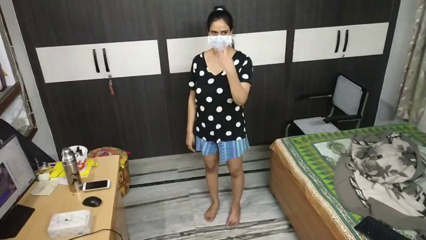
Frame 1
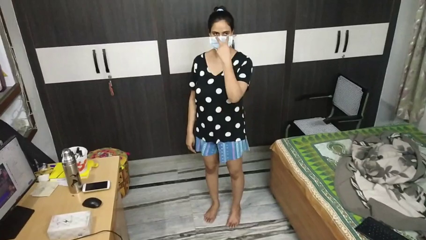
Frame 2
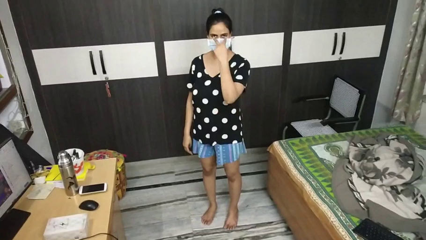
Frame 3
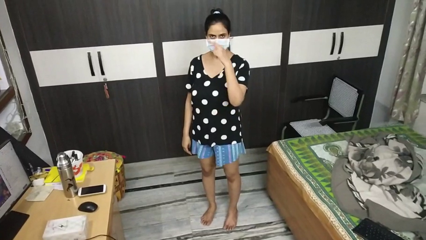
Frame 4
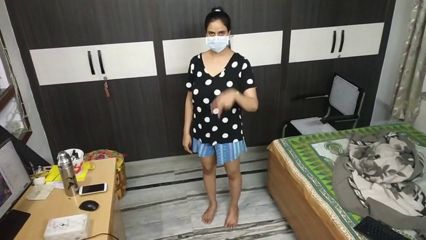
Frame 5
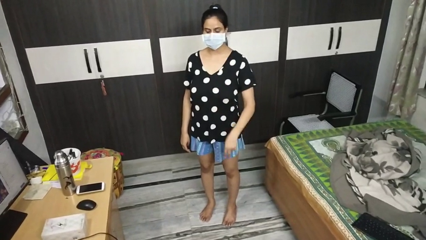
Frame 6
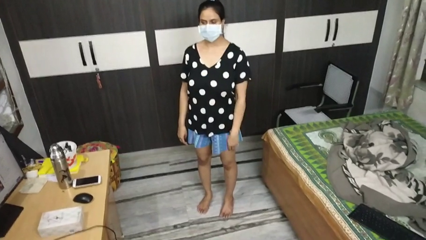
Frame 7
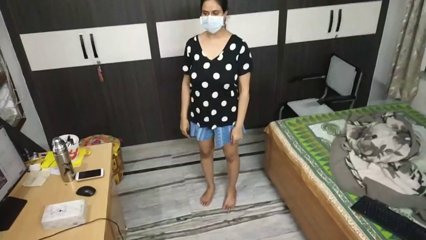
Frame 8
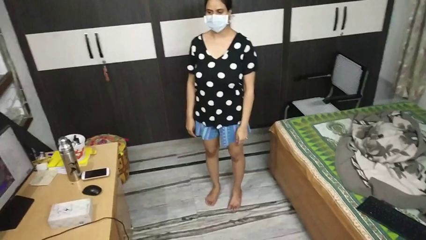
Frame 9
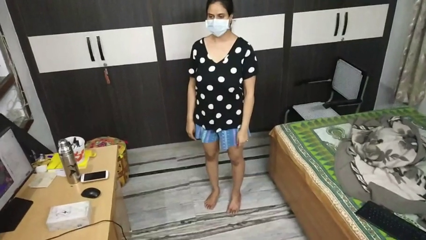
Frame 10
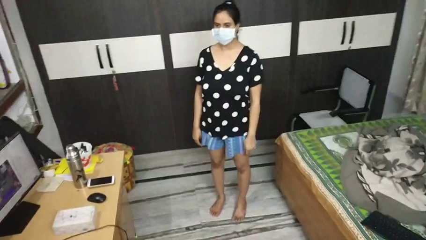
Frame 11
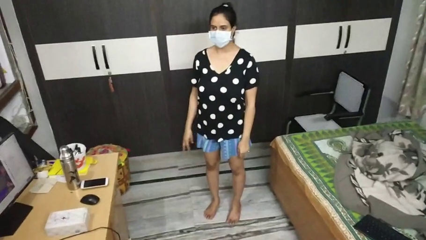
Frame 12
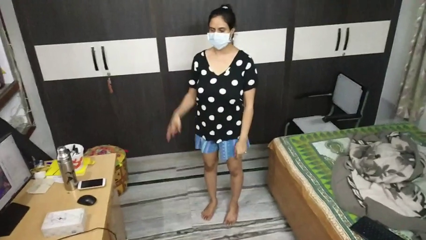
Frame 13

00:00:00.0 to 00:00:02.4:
person gestures watch closely

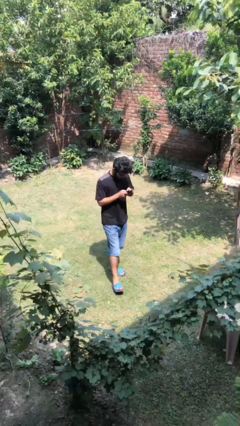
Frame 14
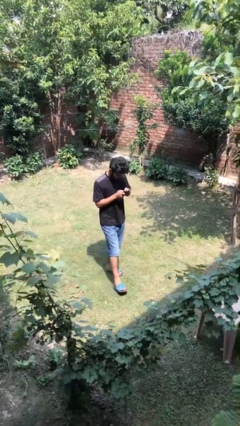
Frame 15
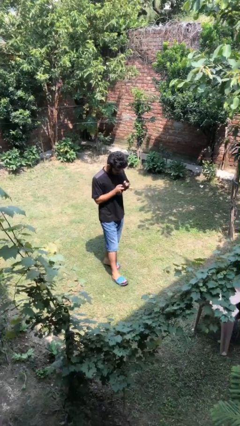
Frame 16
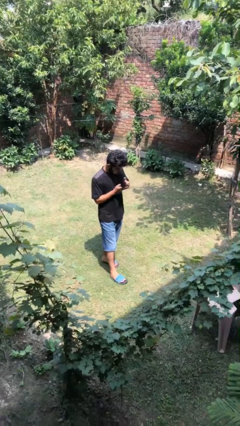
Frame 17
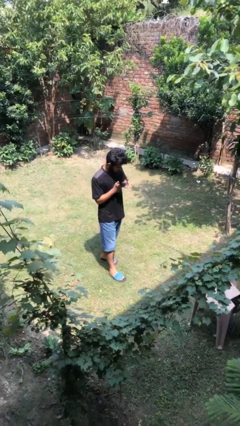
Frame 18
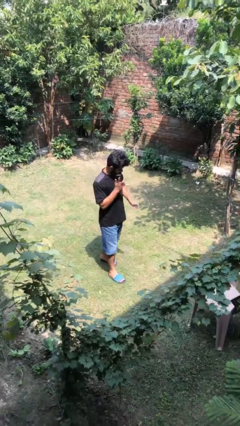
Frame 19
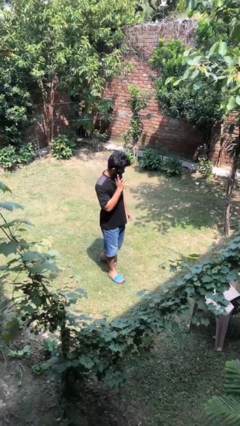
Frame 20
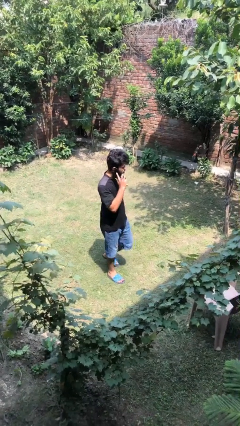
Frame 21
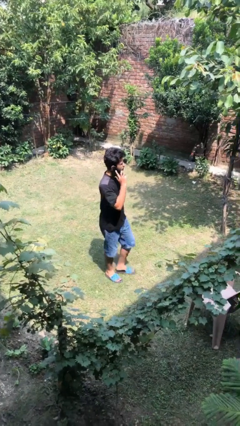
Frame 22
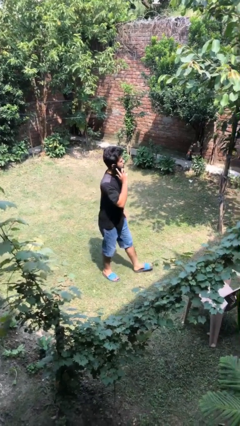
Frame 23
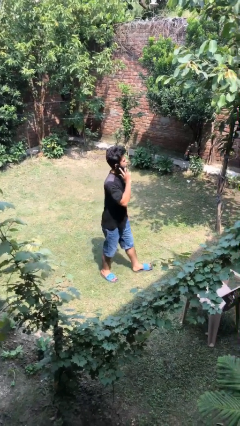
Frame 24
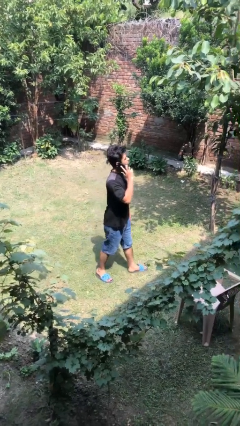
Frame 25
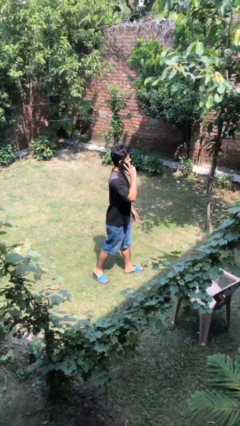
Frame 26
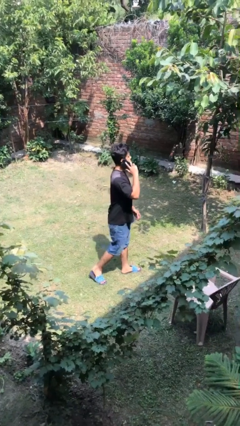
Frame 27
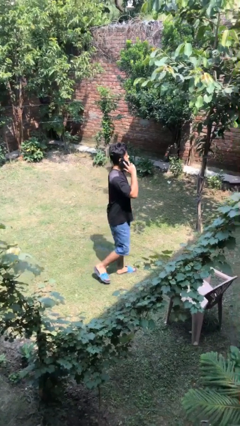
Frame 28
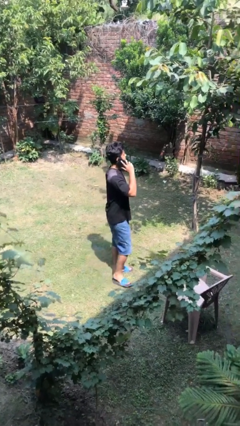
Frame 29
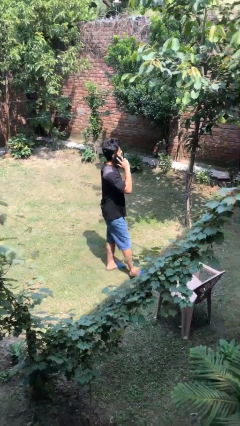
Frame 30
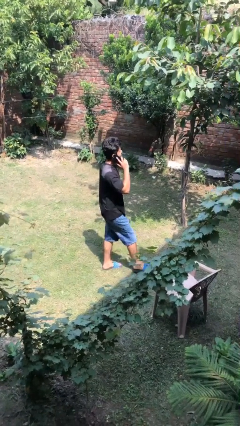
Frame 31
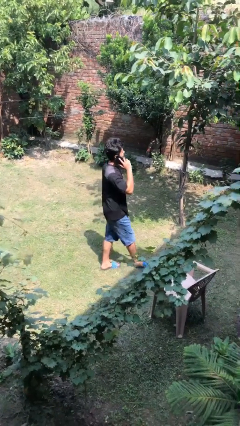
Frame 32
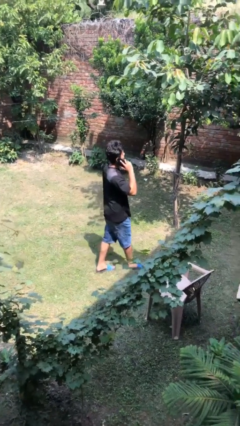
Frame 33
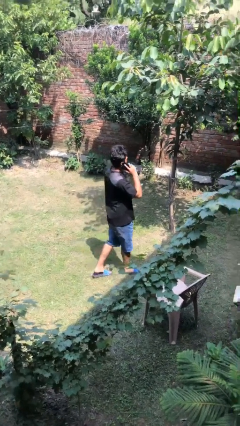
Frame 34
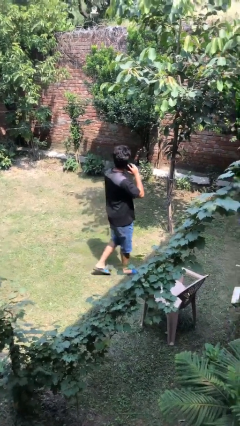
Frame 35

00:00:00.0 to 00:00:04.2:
person talks on phone

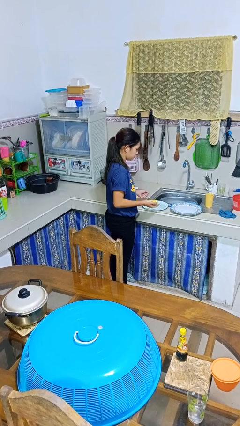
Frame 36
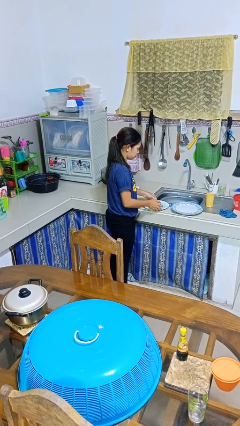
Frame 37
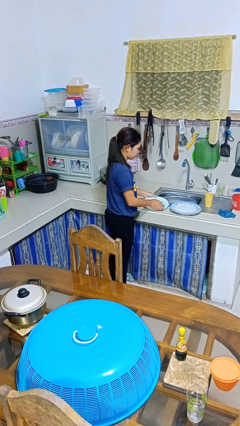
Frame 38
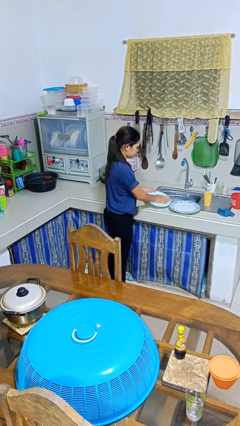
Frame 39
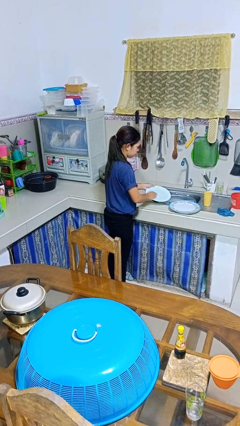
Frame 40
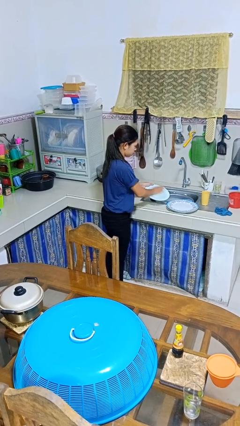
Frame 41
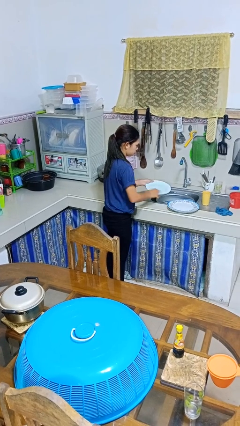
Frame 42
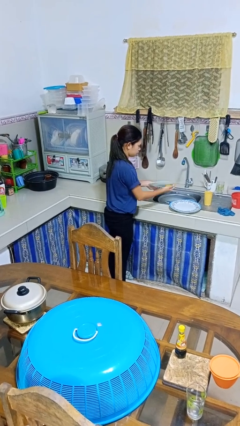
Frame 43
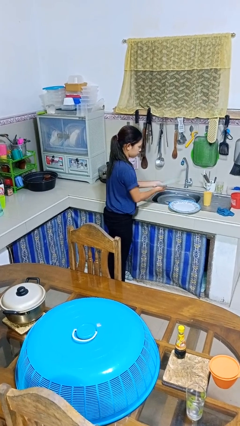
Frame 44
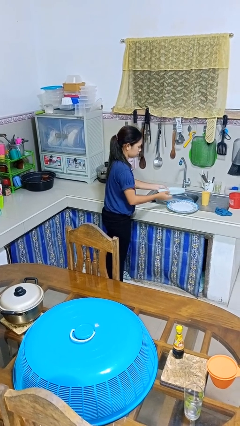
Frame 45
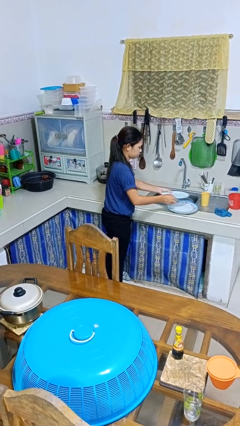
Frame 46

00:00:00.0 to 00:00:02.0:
person washes dish

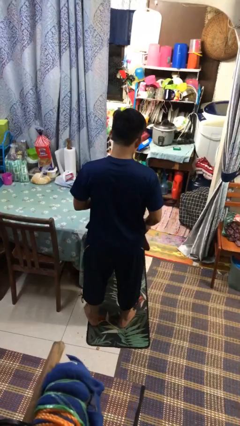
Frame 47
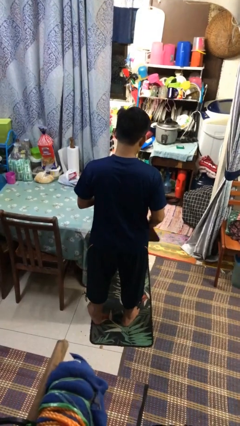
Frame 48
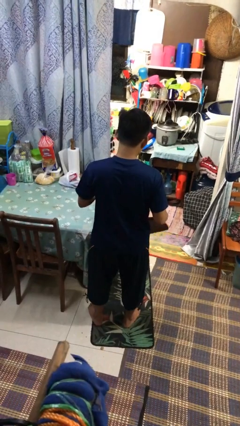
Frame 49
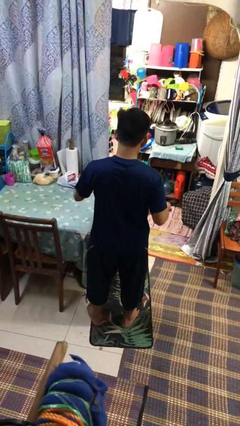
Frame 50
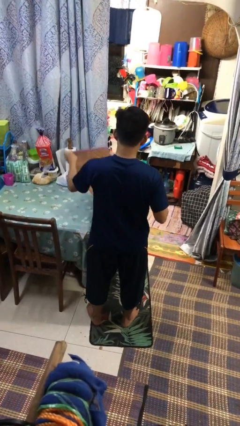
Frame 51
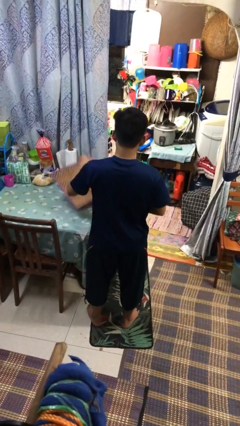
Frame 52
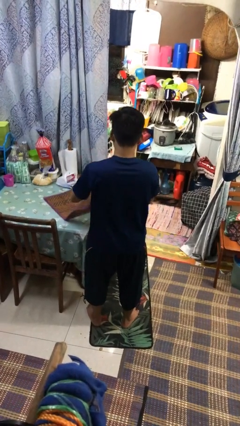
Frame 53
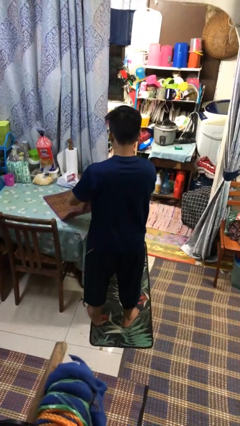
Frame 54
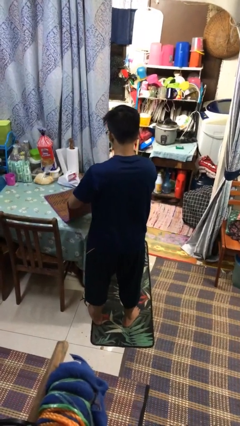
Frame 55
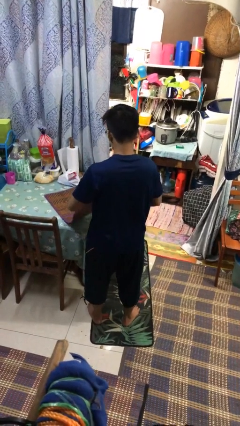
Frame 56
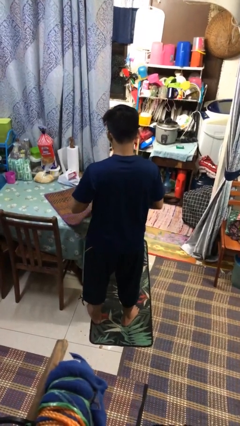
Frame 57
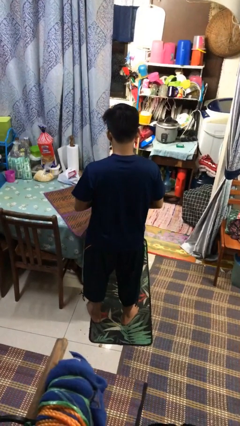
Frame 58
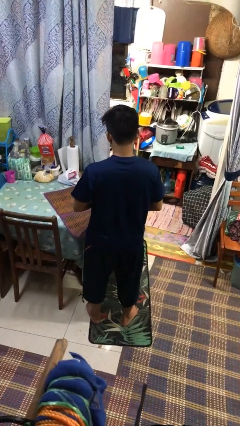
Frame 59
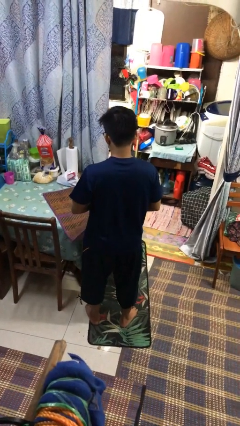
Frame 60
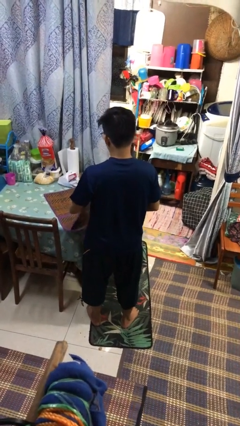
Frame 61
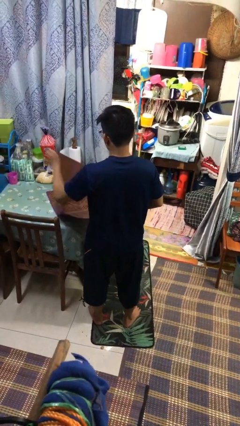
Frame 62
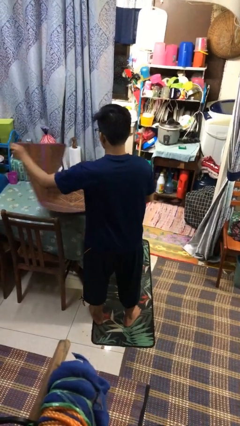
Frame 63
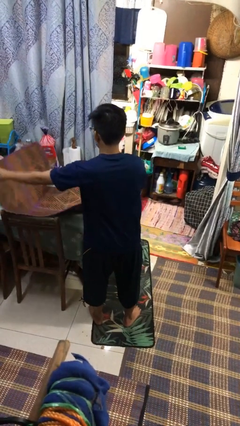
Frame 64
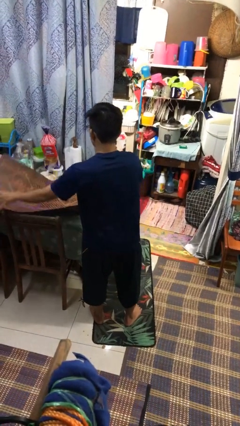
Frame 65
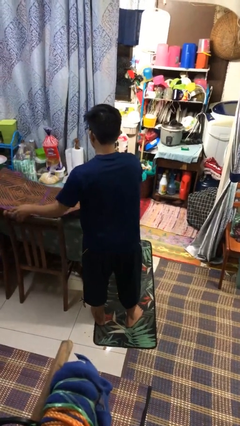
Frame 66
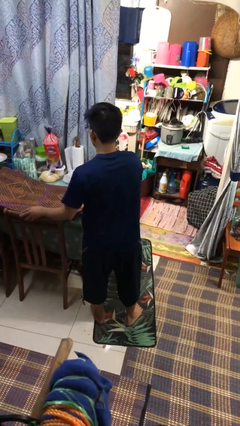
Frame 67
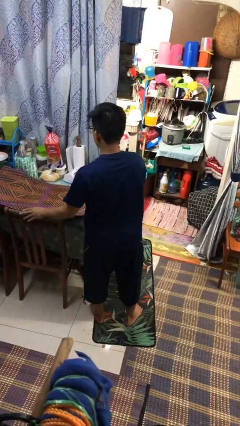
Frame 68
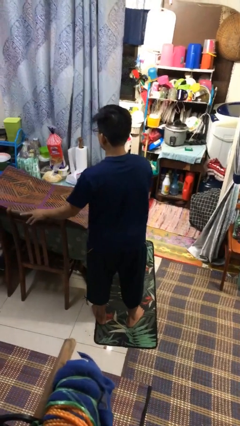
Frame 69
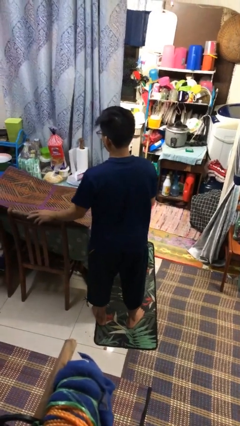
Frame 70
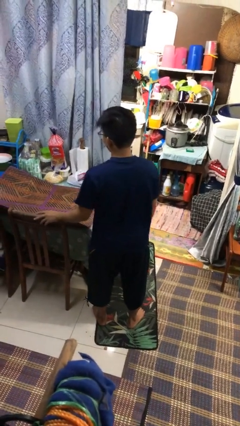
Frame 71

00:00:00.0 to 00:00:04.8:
person spreads tablecloth

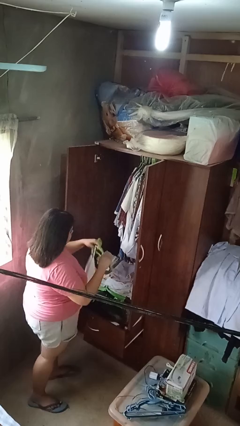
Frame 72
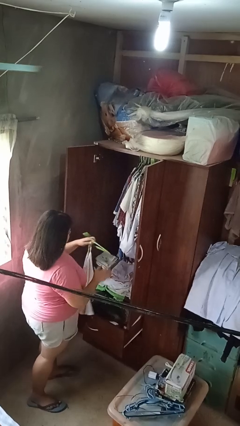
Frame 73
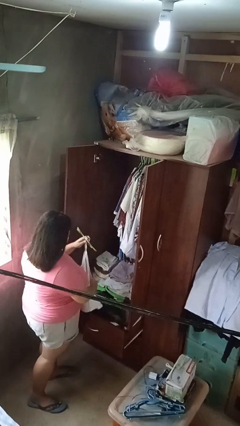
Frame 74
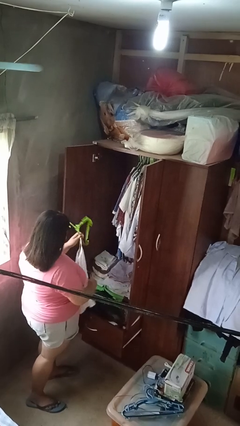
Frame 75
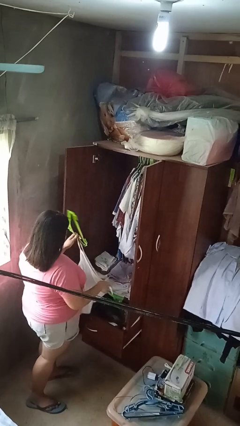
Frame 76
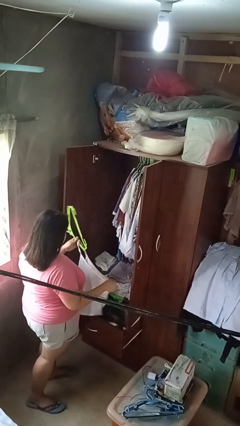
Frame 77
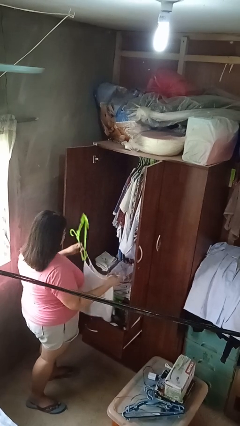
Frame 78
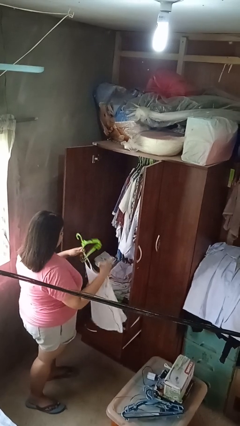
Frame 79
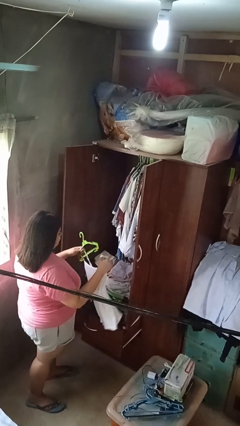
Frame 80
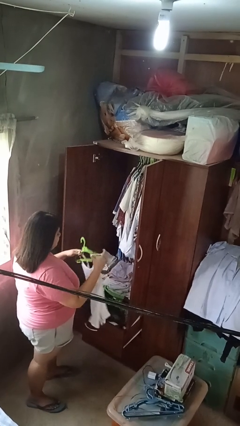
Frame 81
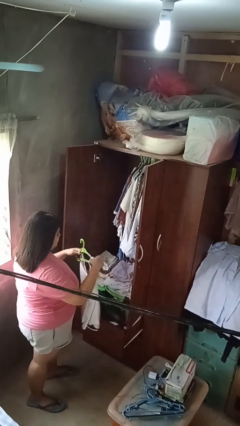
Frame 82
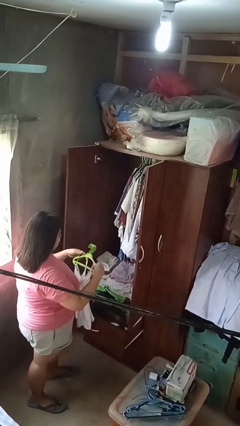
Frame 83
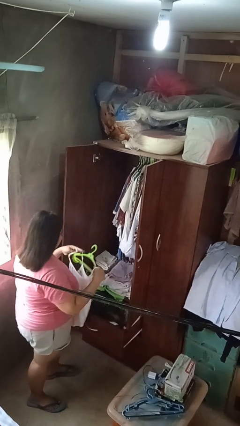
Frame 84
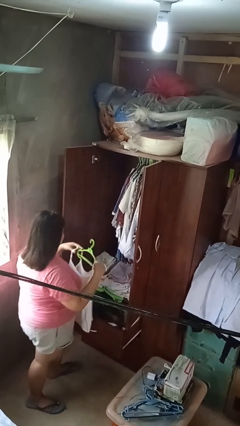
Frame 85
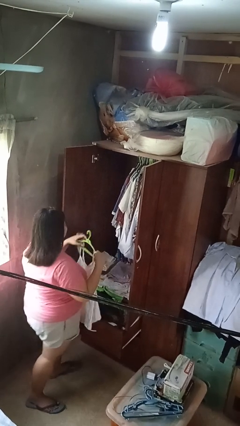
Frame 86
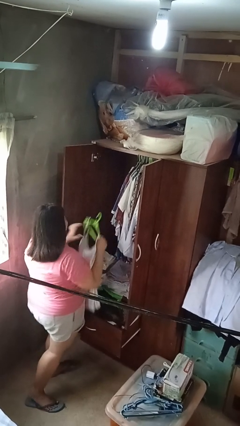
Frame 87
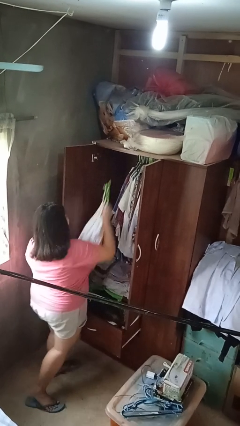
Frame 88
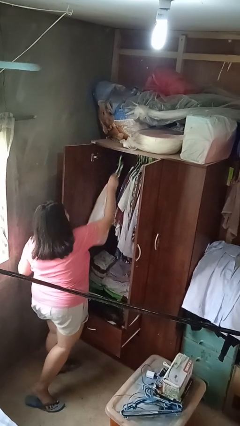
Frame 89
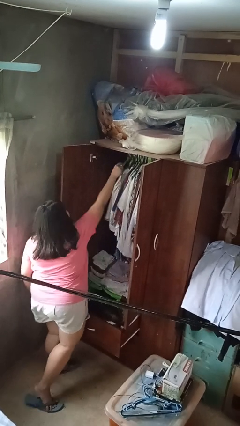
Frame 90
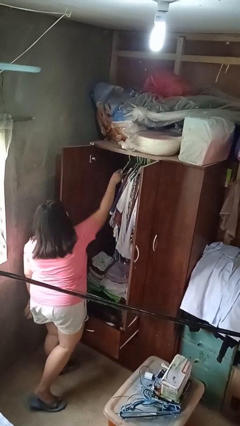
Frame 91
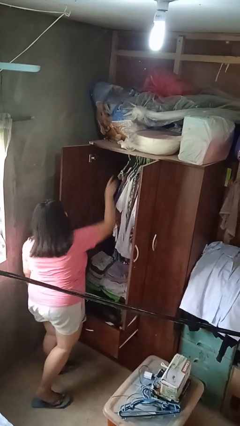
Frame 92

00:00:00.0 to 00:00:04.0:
person puts clothes into closet

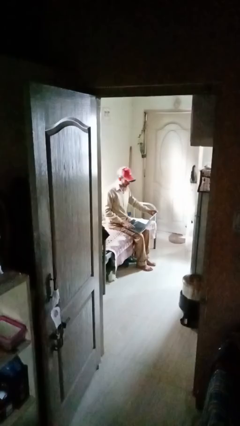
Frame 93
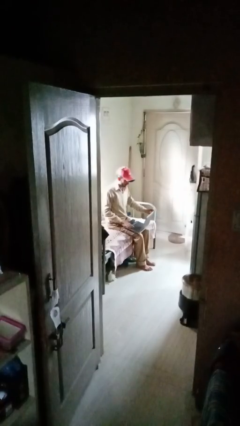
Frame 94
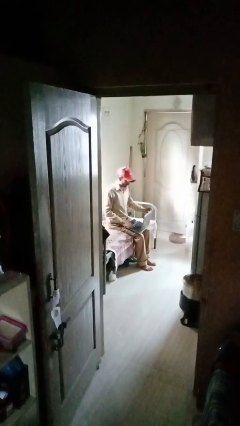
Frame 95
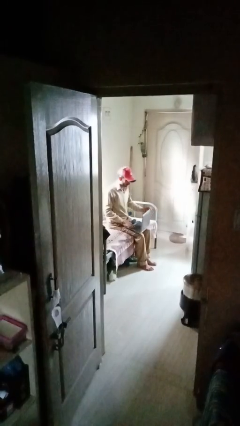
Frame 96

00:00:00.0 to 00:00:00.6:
person closes laptop
